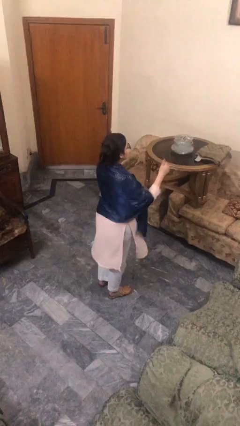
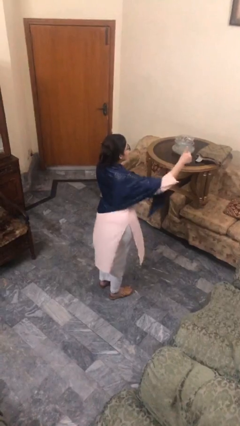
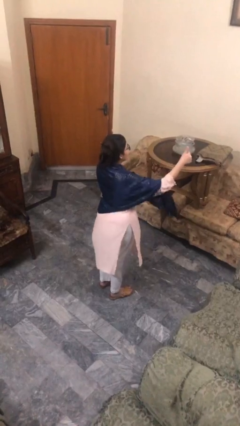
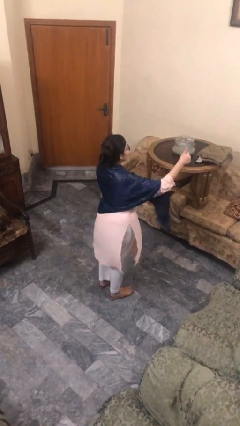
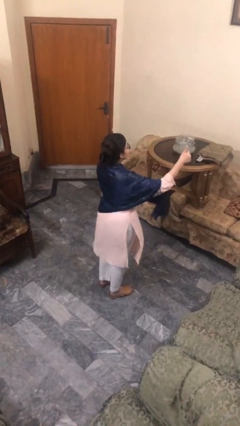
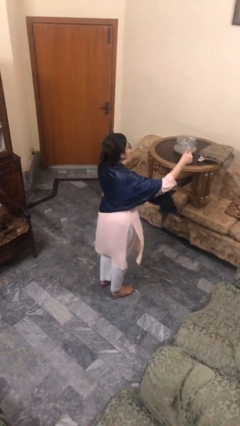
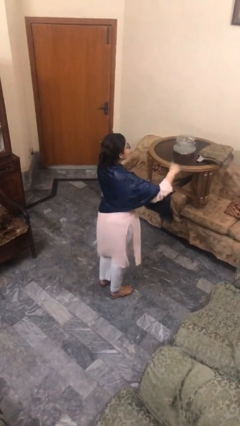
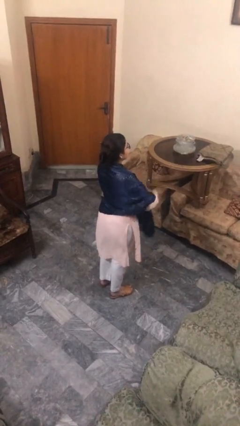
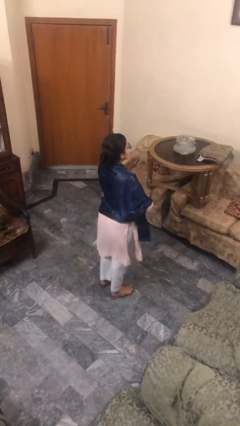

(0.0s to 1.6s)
person gestures thumbs up

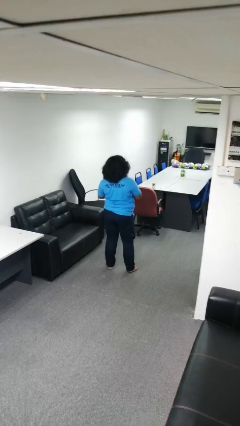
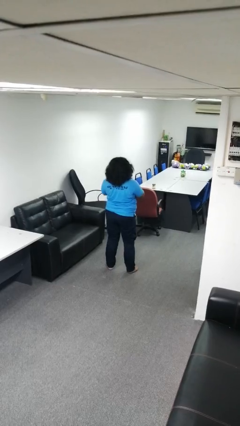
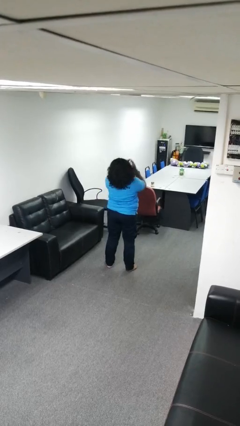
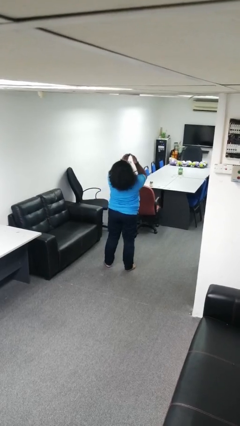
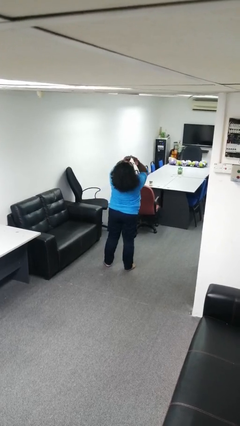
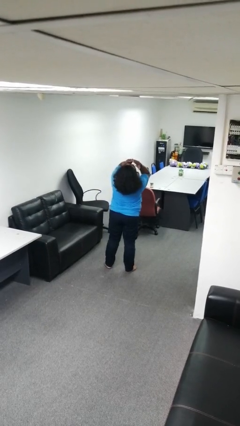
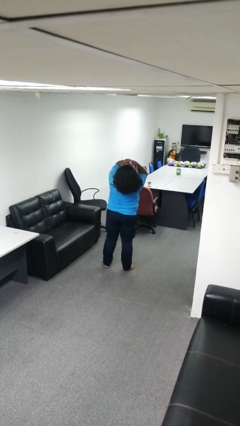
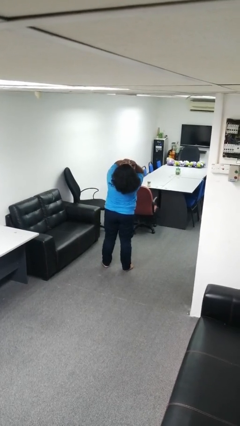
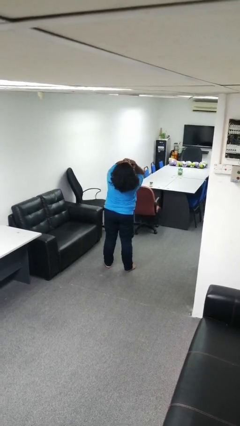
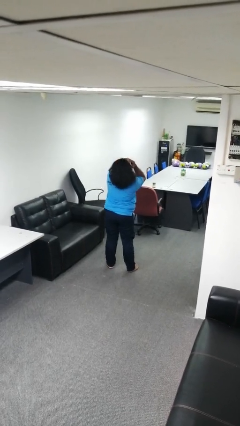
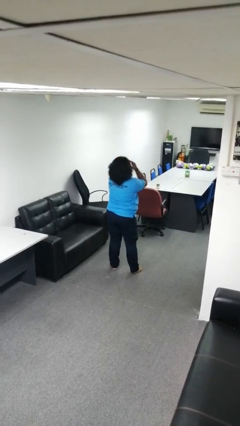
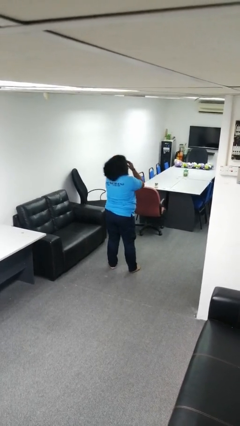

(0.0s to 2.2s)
person covers face with hands

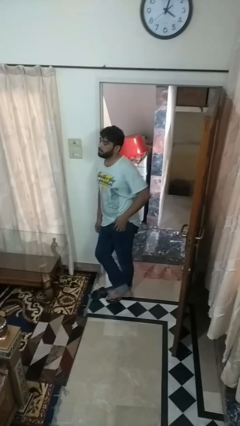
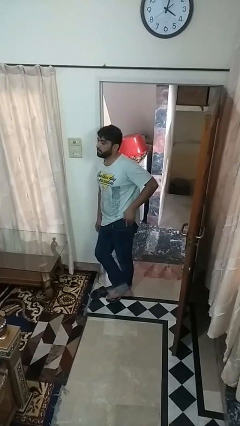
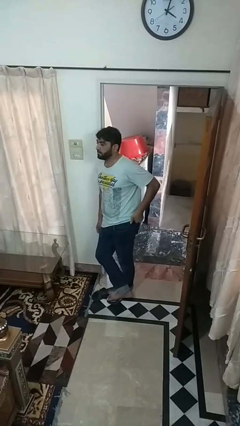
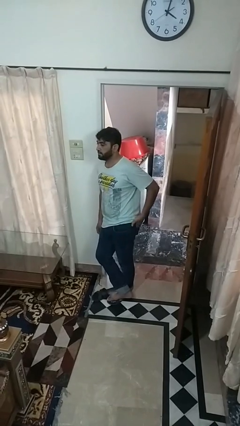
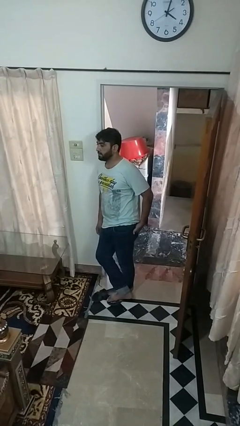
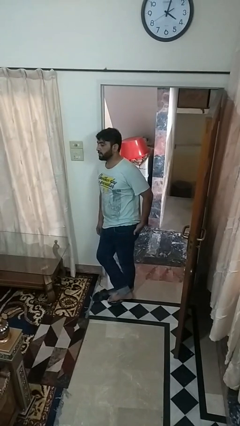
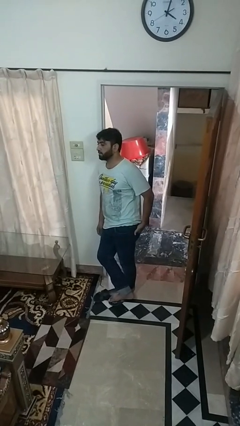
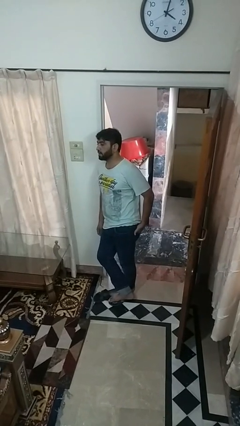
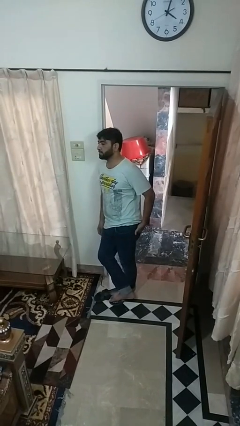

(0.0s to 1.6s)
person puts hands in back pockets

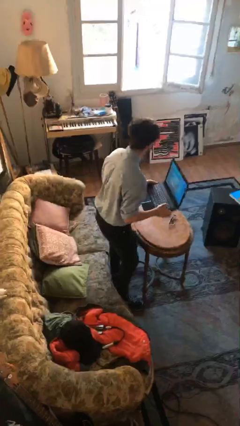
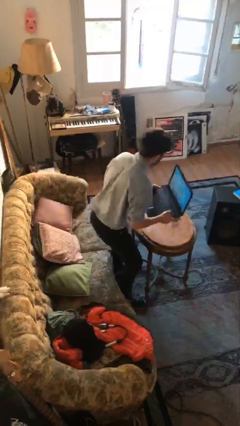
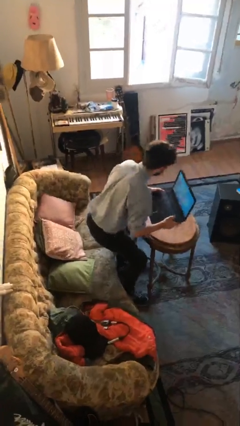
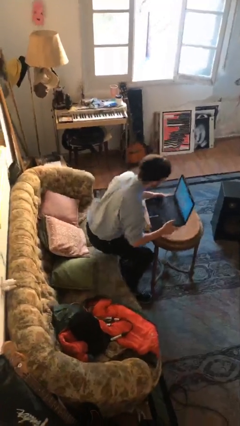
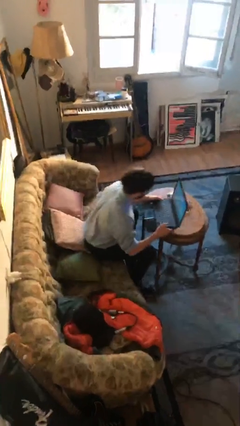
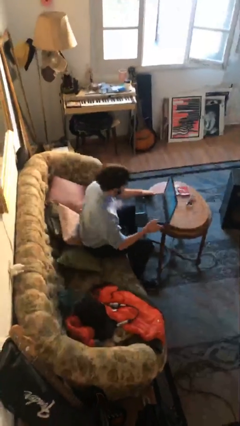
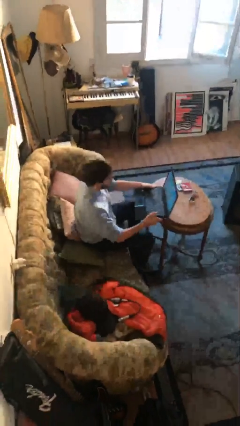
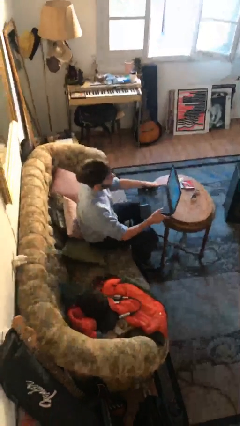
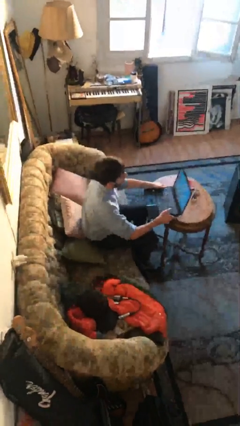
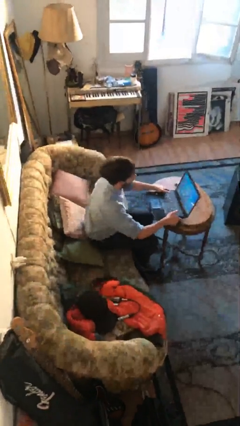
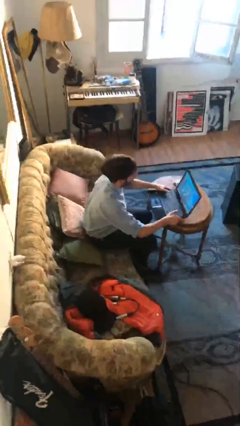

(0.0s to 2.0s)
person sits down

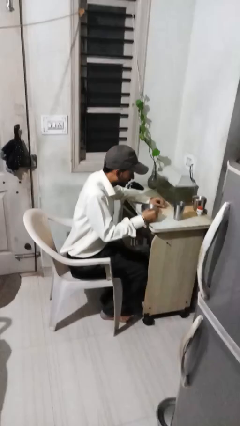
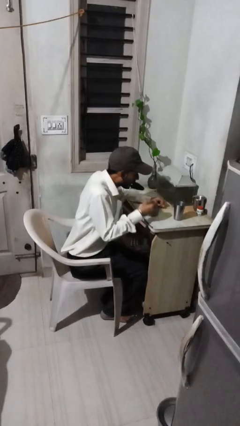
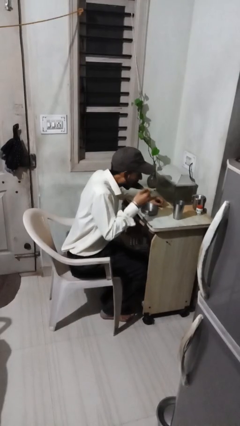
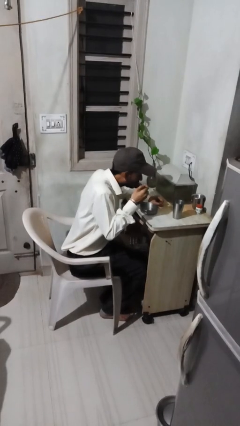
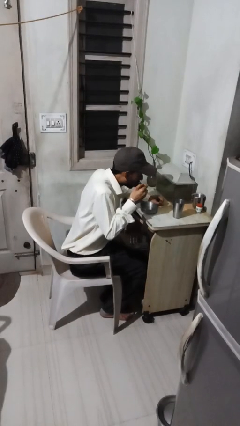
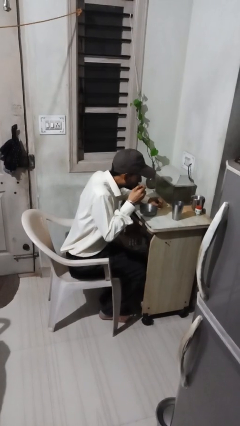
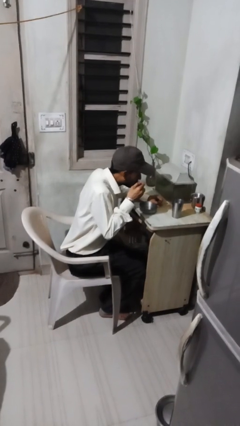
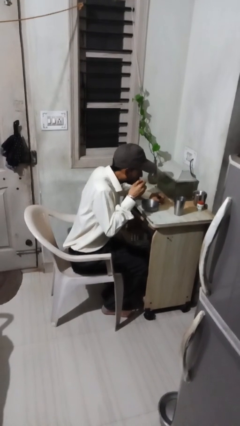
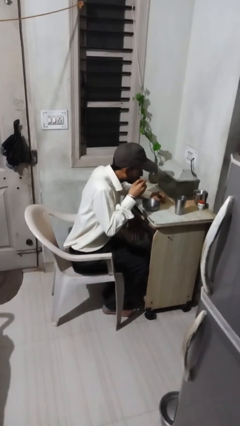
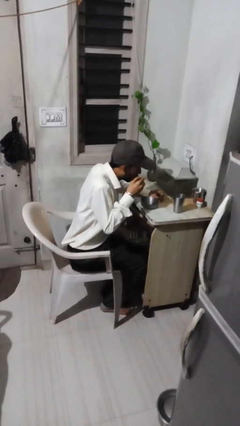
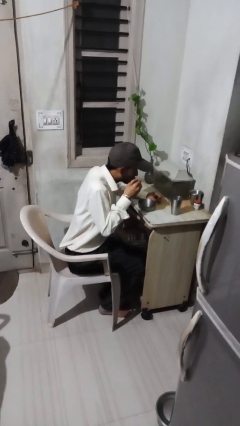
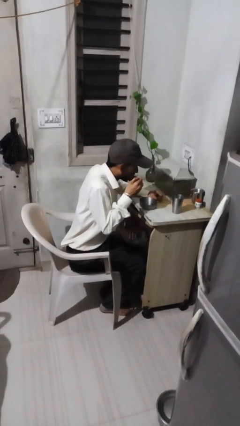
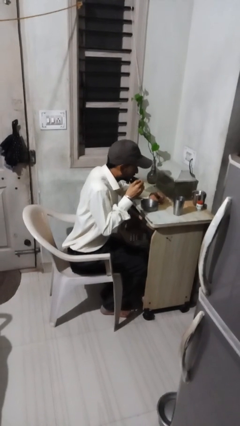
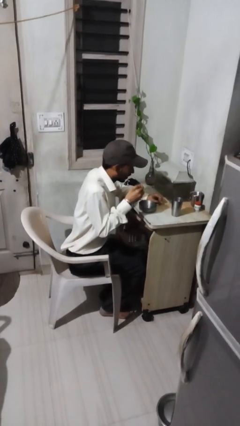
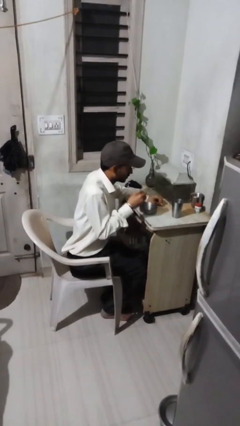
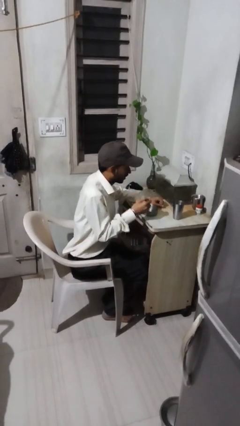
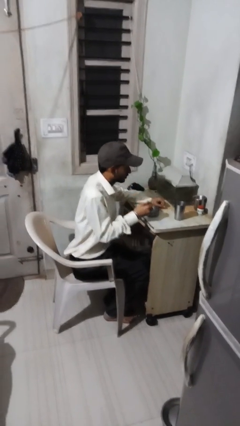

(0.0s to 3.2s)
person eats with utensil

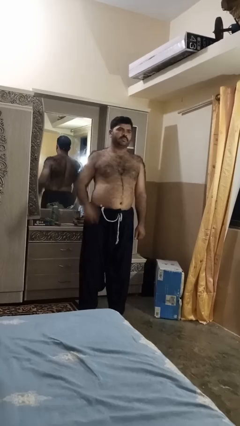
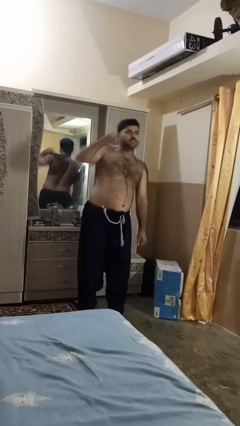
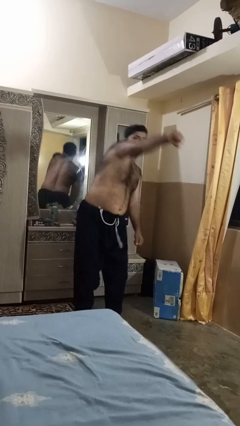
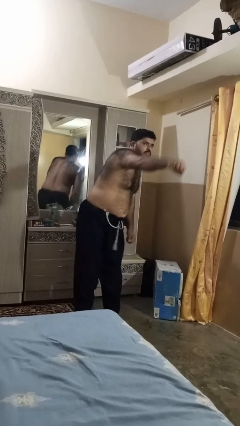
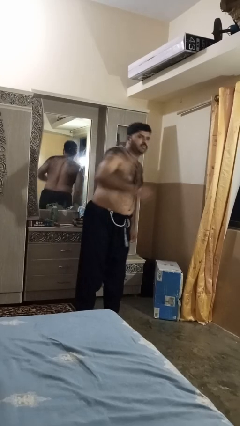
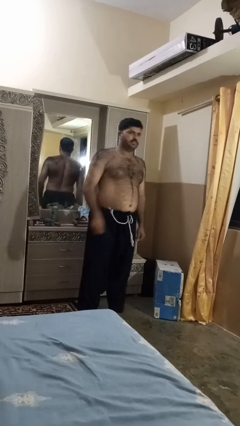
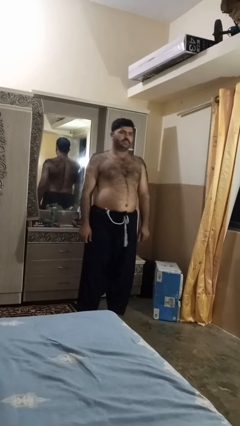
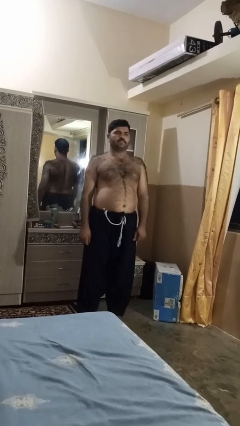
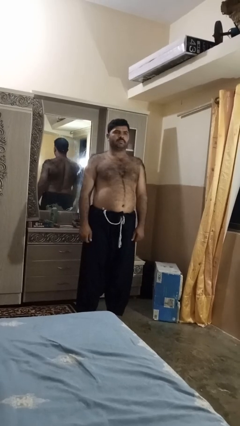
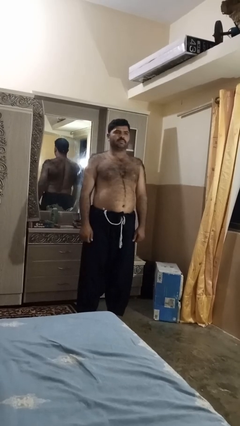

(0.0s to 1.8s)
person karate chop

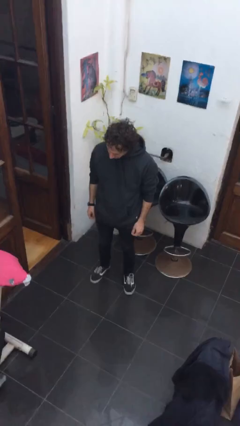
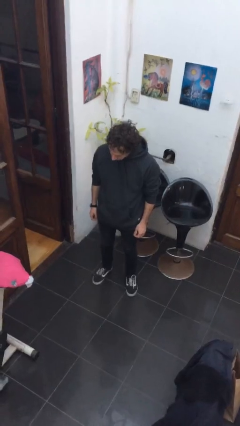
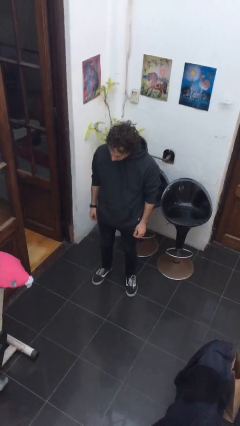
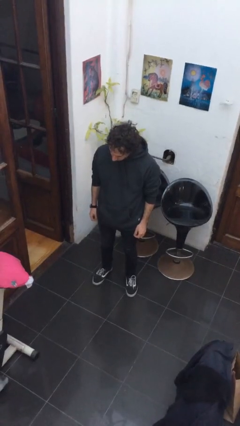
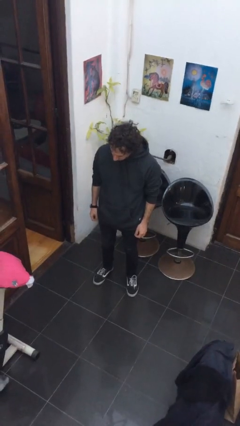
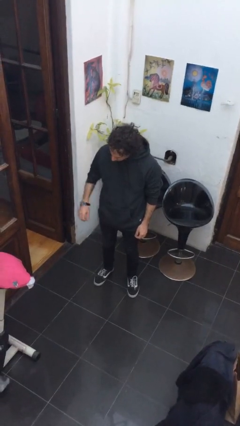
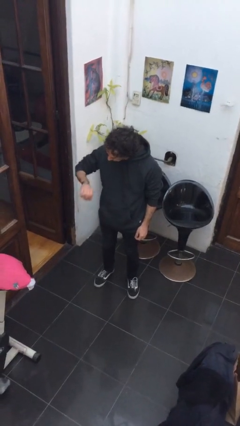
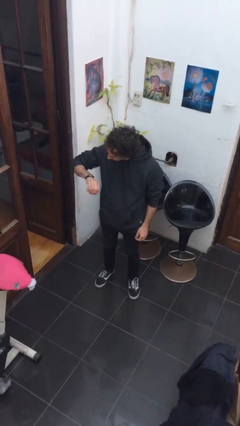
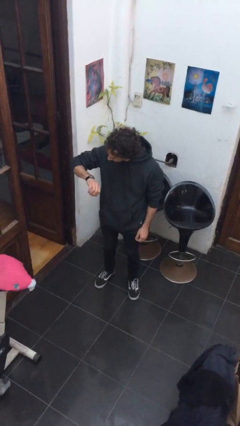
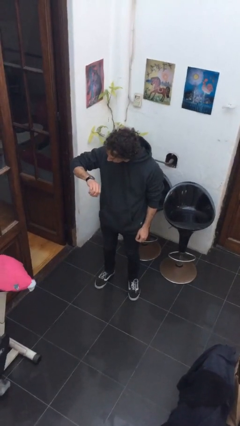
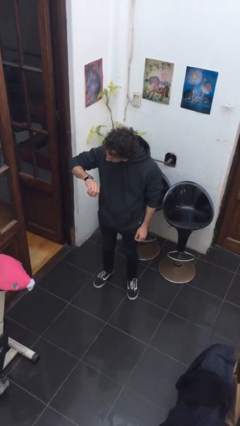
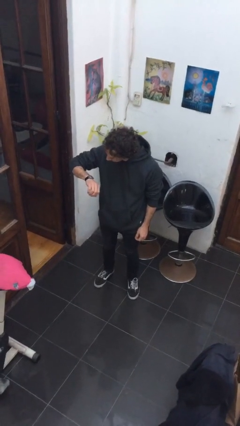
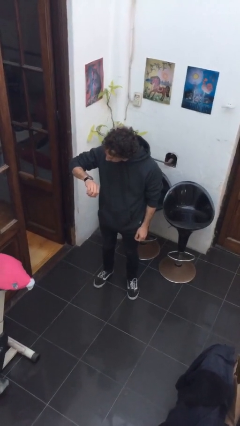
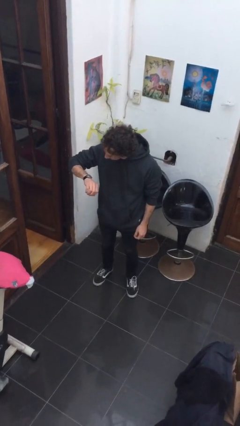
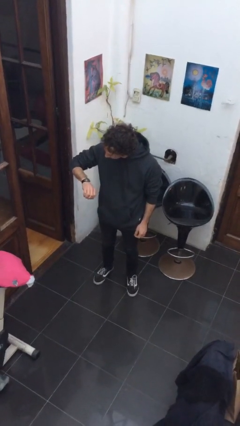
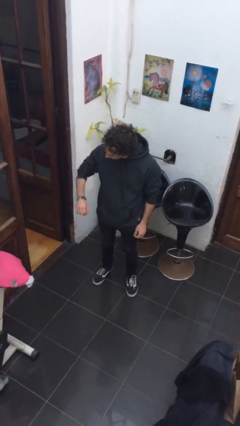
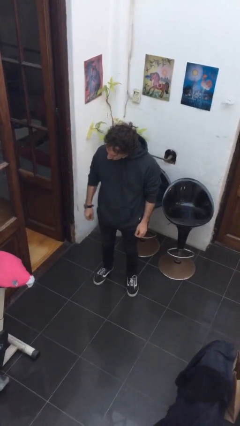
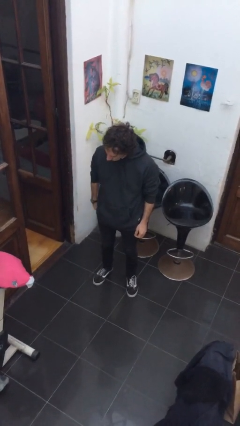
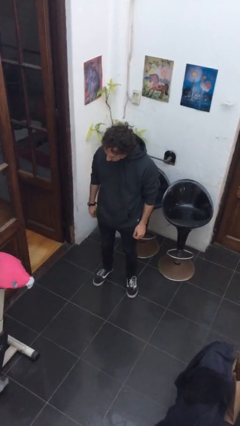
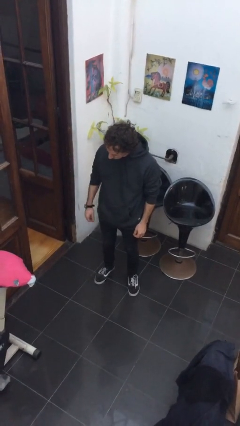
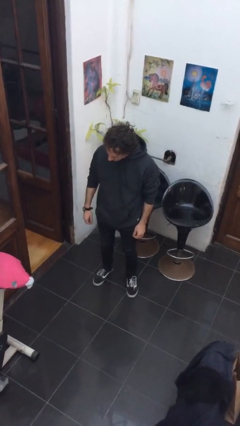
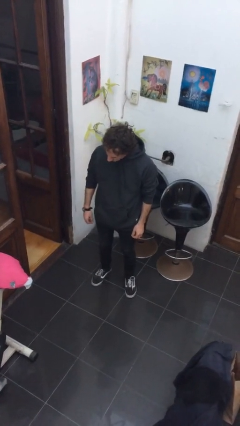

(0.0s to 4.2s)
person looks at wristwatch

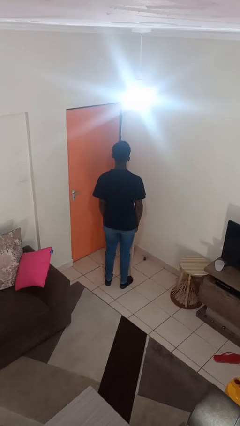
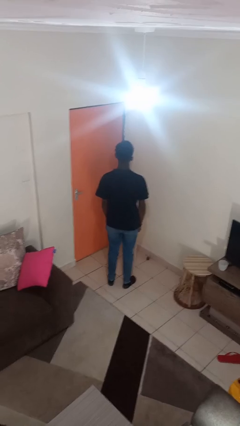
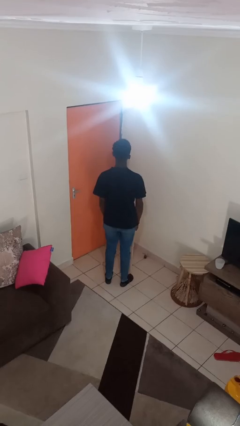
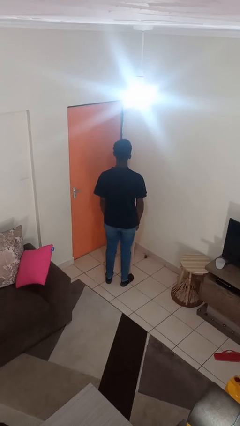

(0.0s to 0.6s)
person takes off necktie
